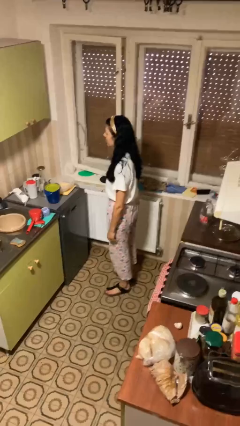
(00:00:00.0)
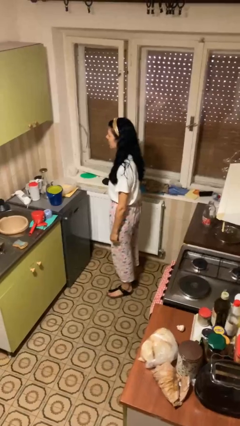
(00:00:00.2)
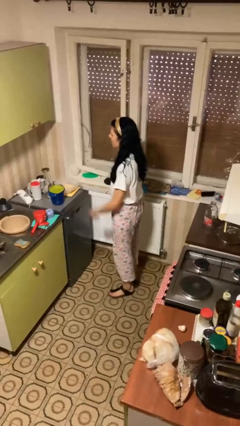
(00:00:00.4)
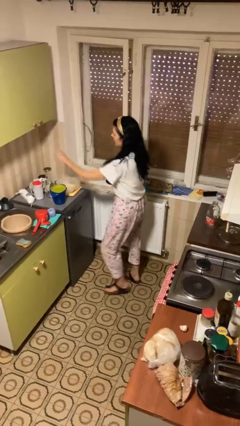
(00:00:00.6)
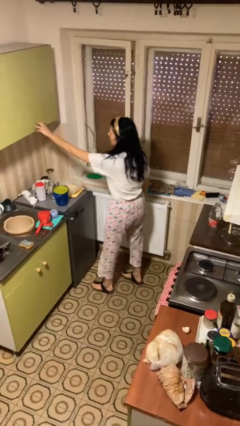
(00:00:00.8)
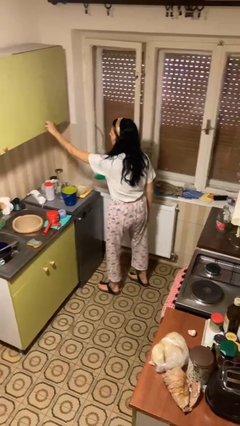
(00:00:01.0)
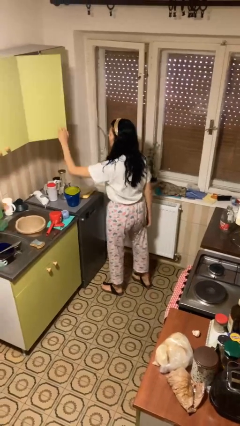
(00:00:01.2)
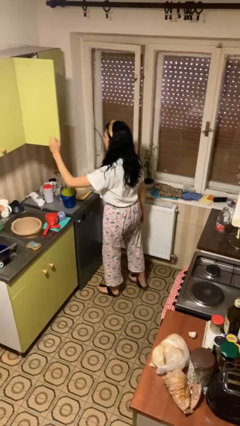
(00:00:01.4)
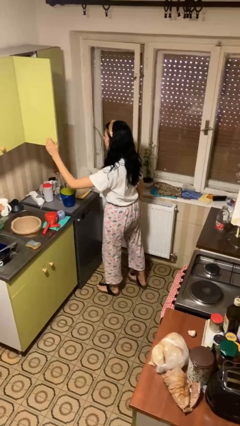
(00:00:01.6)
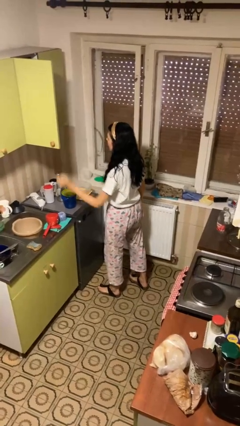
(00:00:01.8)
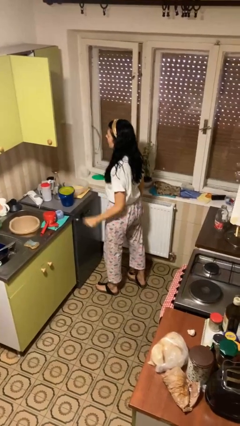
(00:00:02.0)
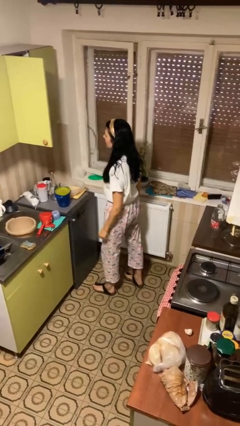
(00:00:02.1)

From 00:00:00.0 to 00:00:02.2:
person opens cabinet

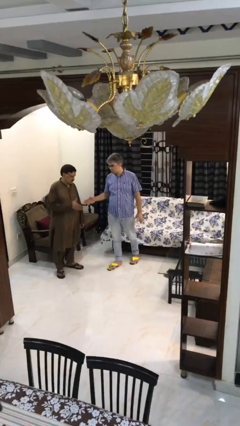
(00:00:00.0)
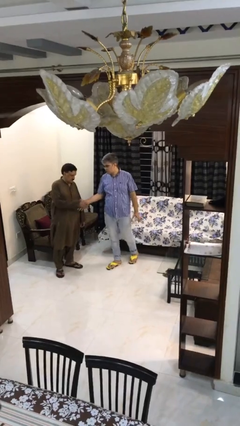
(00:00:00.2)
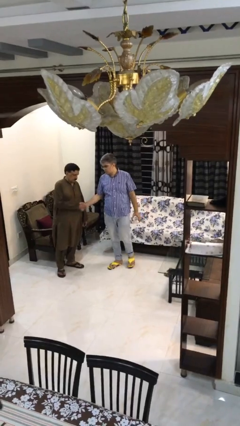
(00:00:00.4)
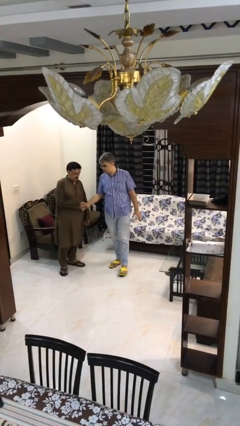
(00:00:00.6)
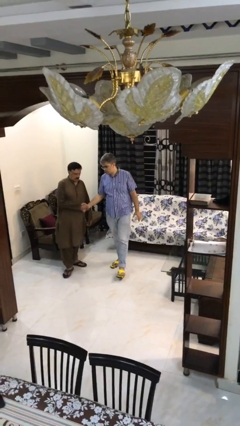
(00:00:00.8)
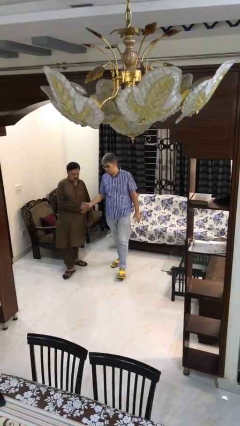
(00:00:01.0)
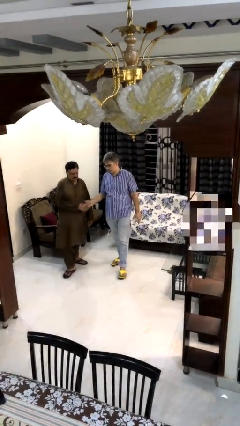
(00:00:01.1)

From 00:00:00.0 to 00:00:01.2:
person shakes hand

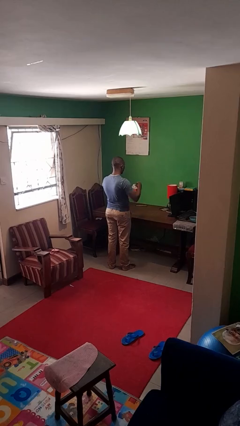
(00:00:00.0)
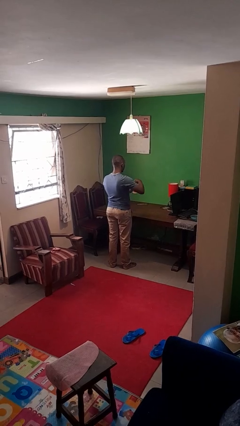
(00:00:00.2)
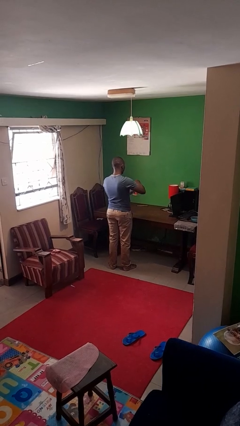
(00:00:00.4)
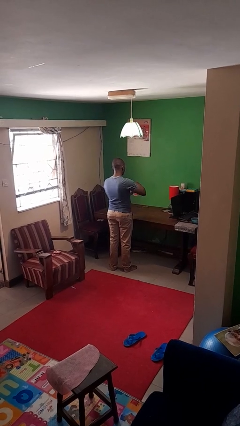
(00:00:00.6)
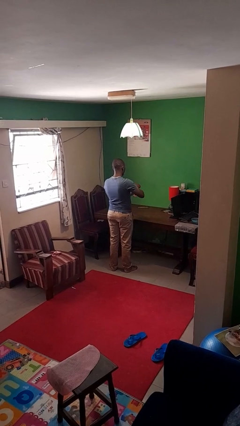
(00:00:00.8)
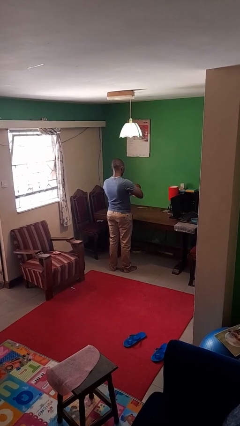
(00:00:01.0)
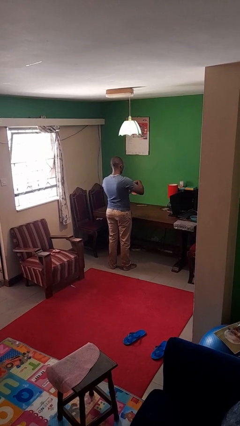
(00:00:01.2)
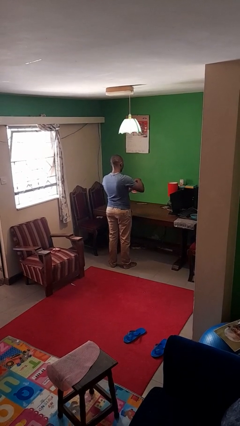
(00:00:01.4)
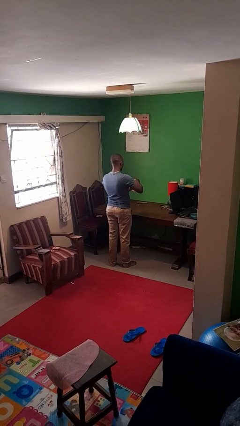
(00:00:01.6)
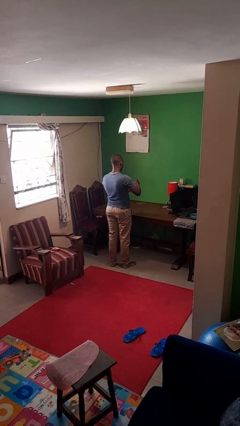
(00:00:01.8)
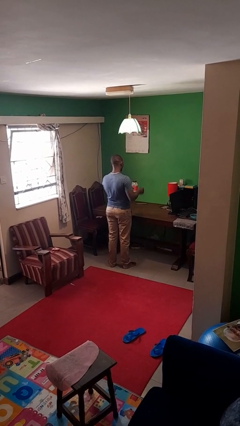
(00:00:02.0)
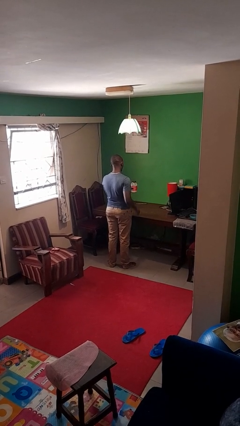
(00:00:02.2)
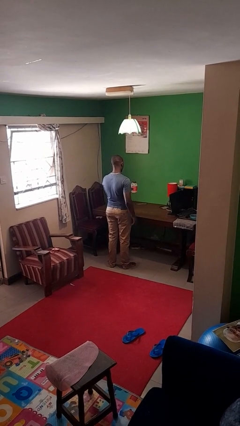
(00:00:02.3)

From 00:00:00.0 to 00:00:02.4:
person closes jar

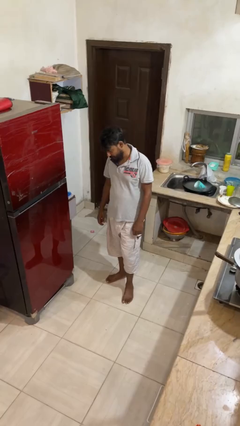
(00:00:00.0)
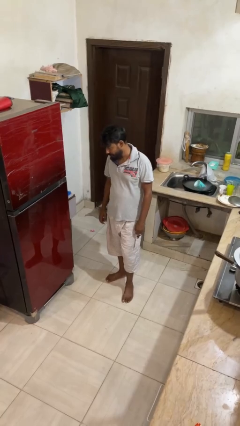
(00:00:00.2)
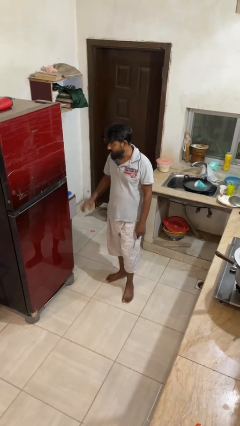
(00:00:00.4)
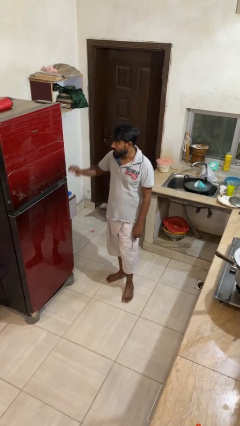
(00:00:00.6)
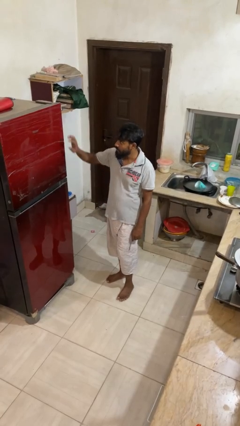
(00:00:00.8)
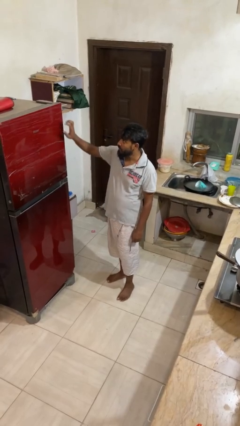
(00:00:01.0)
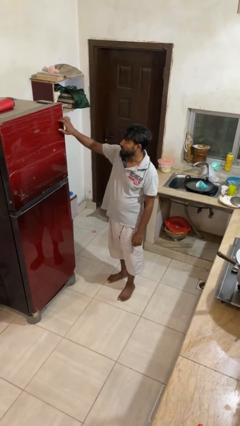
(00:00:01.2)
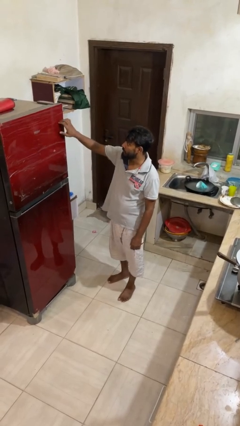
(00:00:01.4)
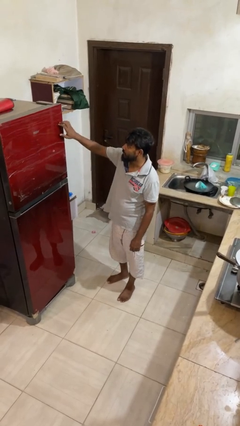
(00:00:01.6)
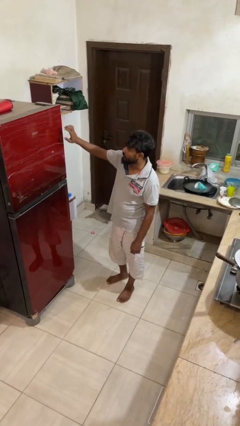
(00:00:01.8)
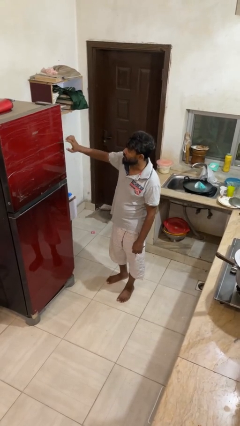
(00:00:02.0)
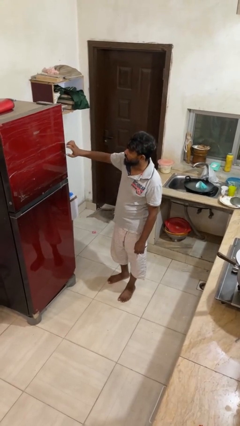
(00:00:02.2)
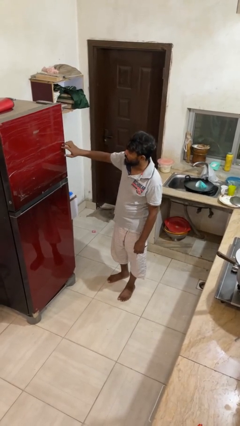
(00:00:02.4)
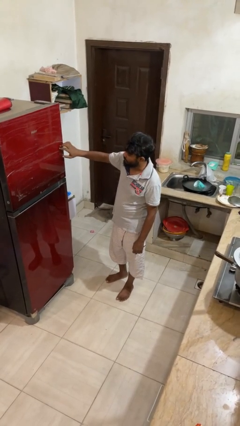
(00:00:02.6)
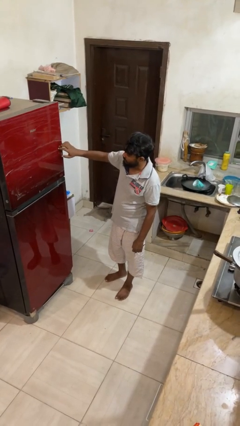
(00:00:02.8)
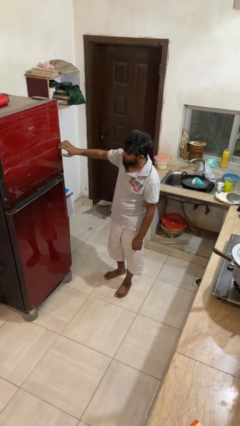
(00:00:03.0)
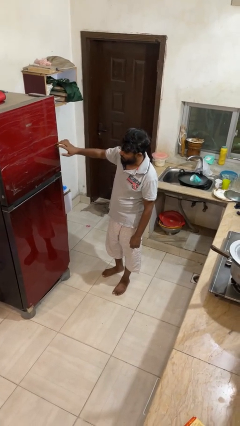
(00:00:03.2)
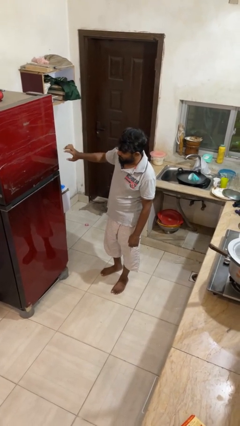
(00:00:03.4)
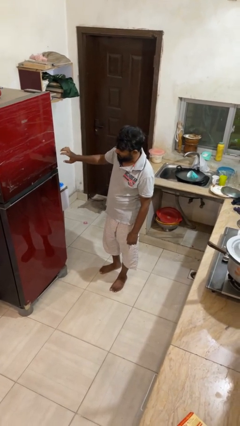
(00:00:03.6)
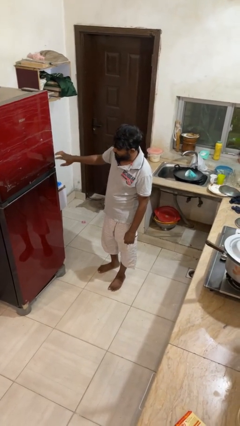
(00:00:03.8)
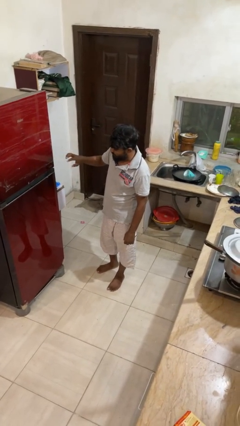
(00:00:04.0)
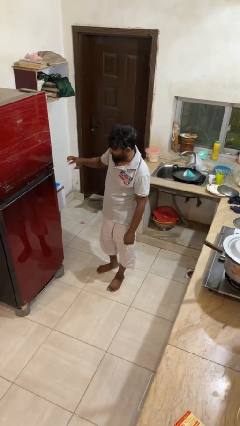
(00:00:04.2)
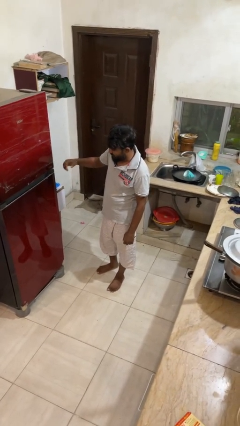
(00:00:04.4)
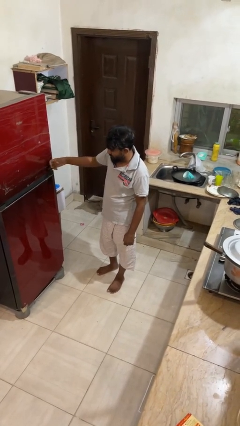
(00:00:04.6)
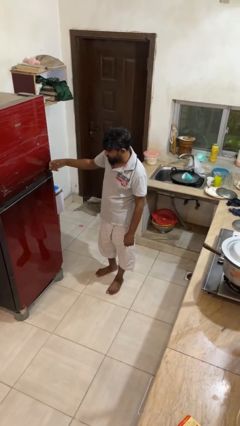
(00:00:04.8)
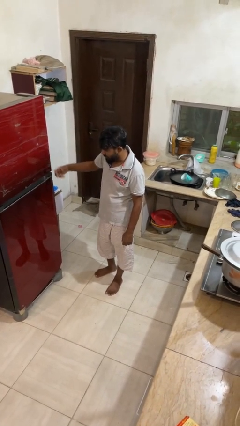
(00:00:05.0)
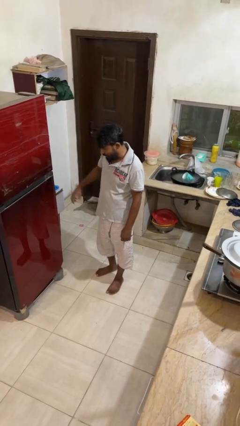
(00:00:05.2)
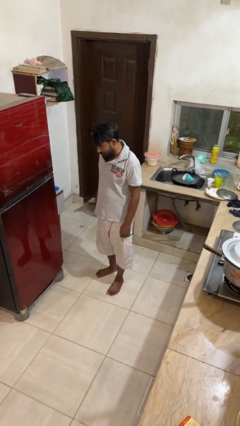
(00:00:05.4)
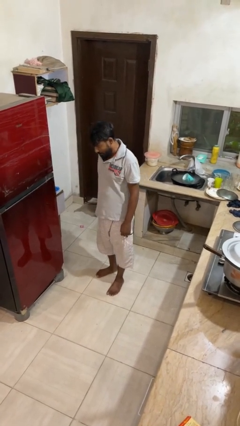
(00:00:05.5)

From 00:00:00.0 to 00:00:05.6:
person taps object with finger

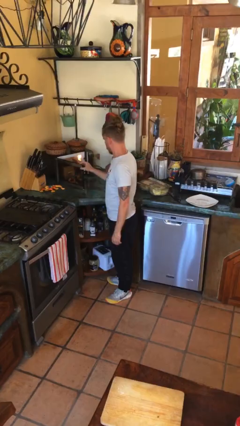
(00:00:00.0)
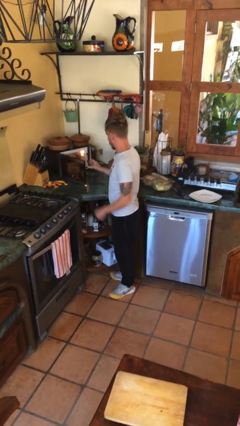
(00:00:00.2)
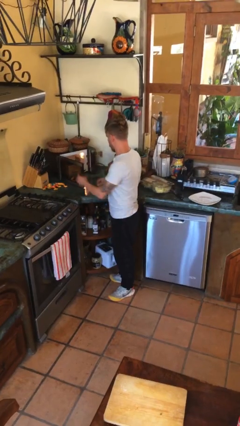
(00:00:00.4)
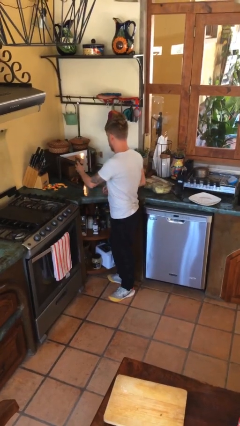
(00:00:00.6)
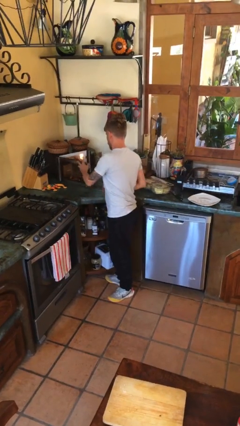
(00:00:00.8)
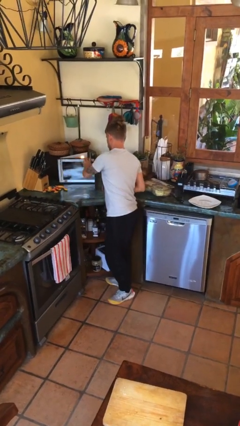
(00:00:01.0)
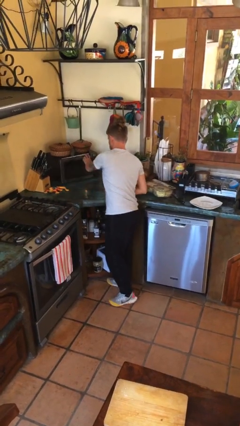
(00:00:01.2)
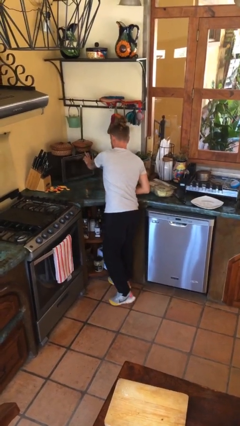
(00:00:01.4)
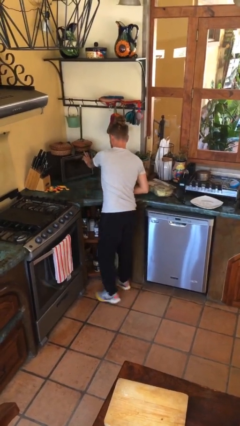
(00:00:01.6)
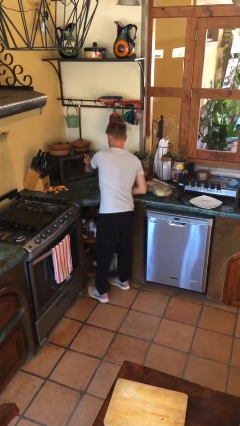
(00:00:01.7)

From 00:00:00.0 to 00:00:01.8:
person closes microwave

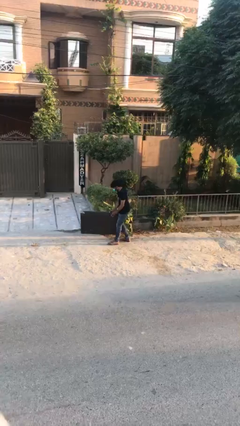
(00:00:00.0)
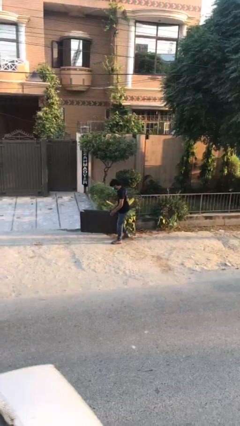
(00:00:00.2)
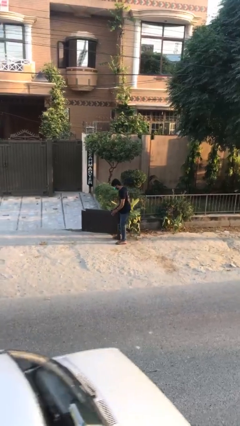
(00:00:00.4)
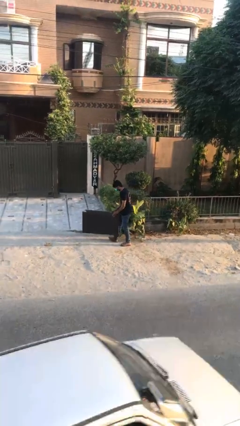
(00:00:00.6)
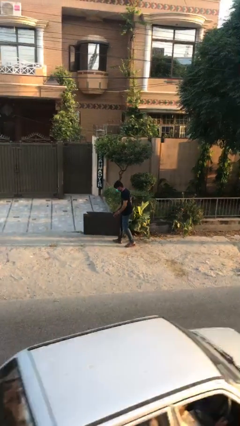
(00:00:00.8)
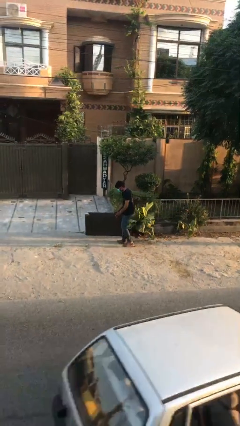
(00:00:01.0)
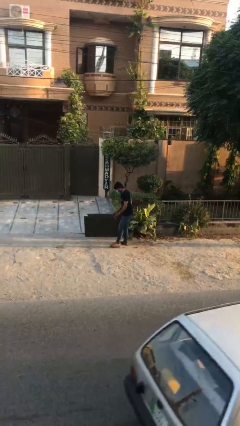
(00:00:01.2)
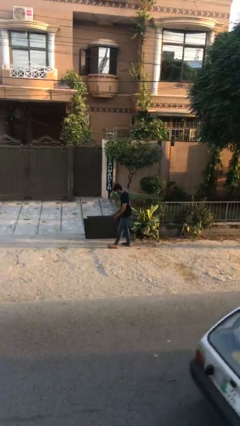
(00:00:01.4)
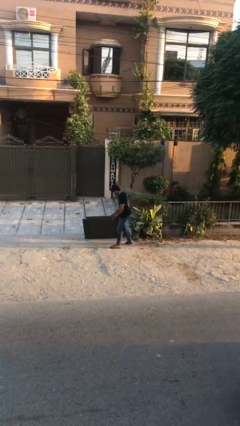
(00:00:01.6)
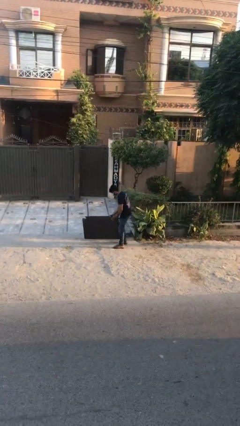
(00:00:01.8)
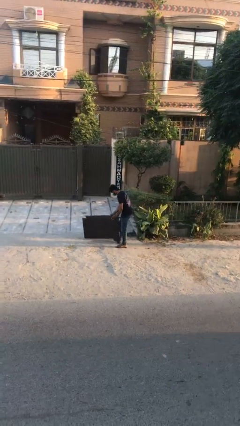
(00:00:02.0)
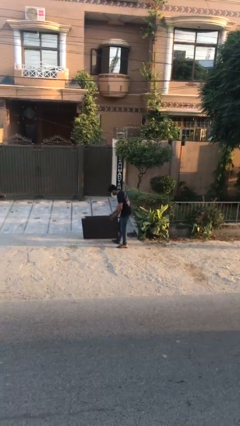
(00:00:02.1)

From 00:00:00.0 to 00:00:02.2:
person carries heavy object

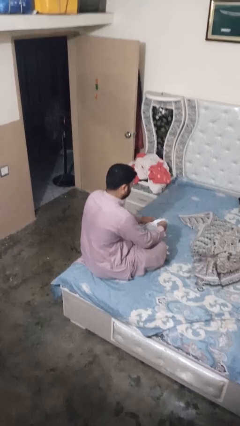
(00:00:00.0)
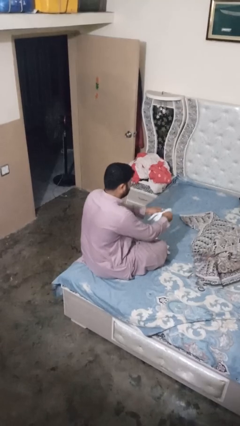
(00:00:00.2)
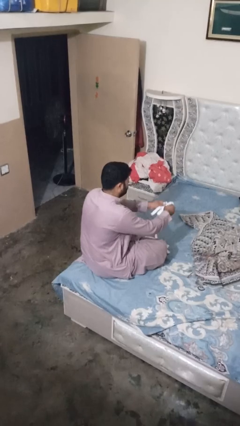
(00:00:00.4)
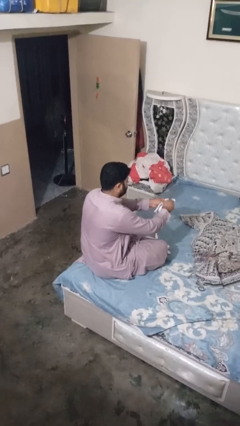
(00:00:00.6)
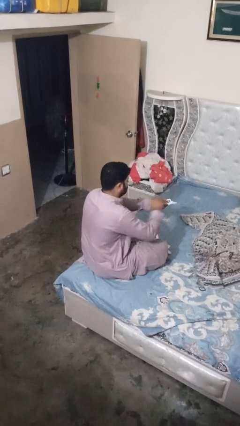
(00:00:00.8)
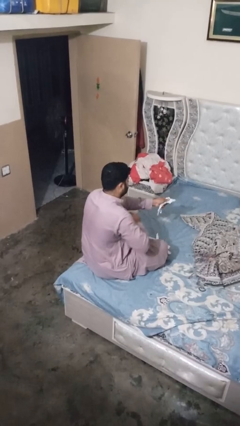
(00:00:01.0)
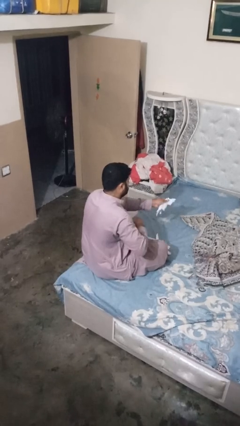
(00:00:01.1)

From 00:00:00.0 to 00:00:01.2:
person tears paper

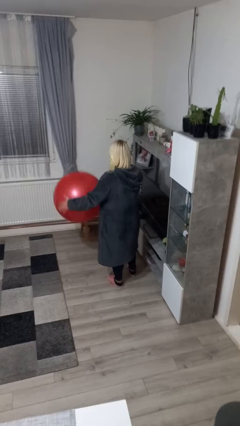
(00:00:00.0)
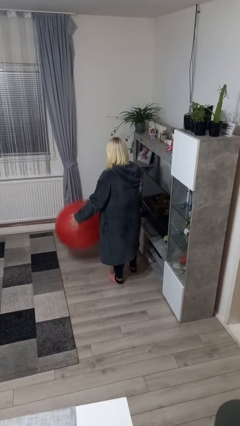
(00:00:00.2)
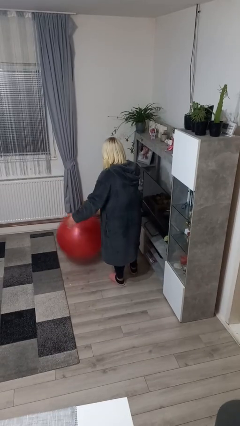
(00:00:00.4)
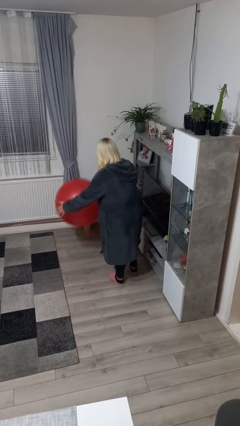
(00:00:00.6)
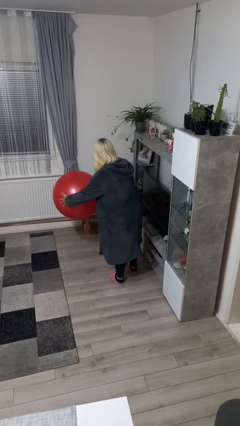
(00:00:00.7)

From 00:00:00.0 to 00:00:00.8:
person bounces ball on floor
